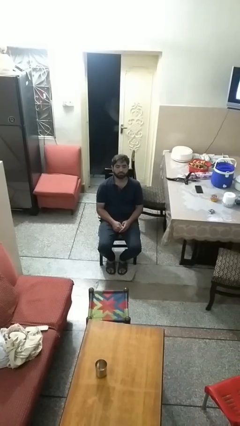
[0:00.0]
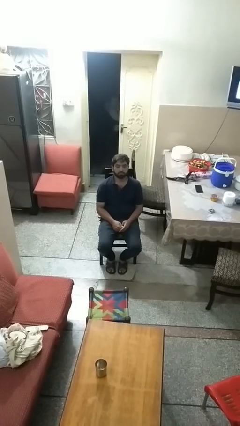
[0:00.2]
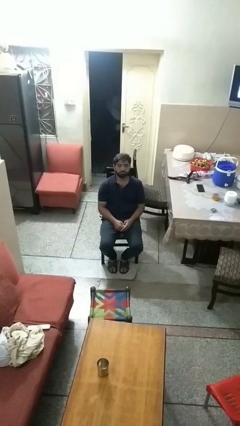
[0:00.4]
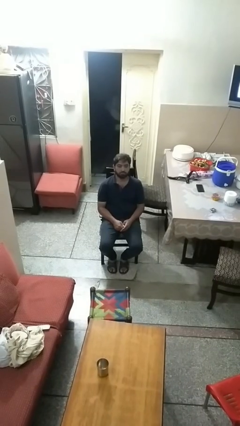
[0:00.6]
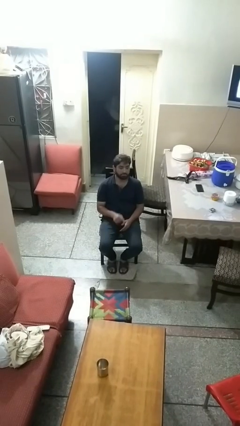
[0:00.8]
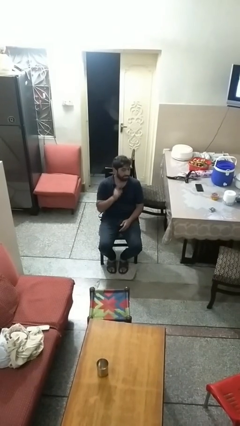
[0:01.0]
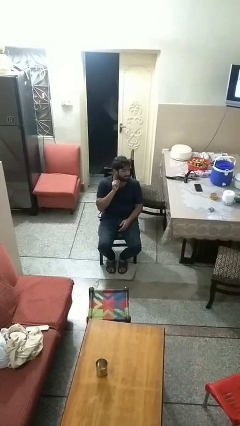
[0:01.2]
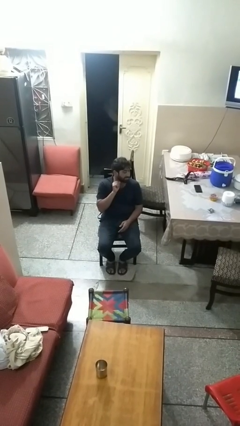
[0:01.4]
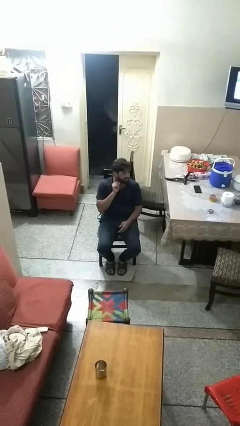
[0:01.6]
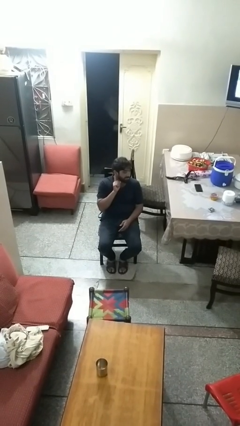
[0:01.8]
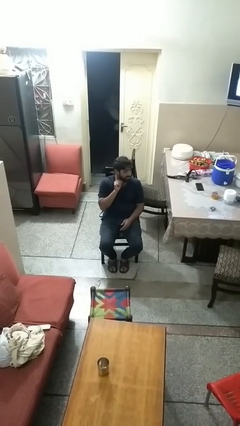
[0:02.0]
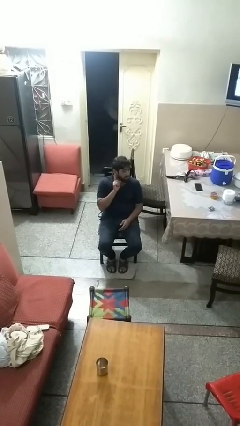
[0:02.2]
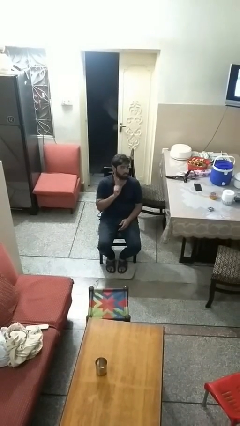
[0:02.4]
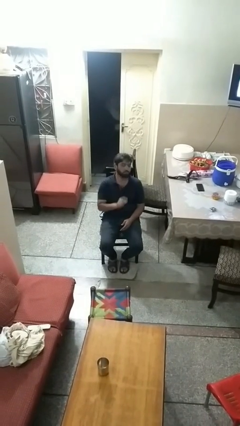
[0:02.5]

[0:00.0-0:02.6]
person gestures listen closely

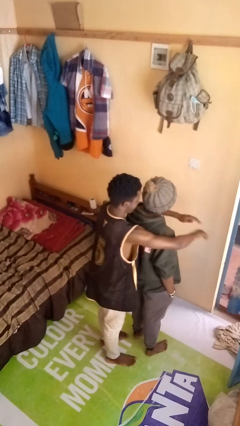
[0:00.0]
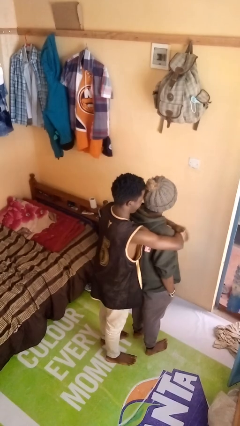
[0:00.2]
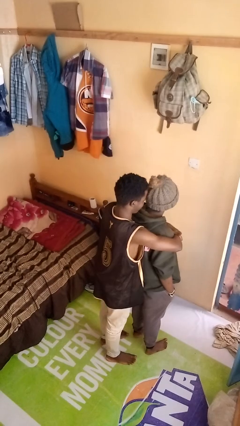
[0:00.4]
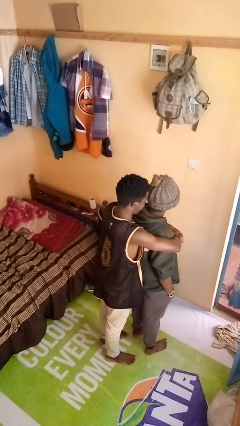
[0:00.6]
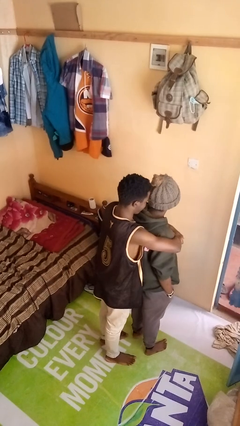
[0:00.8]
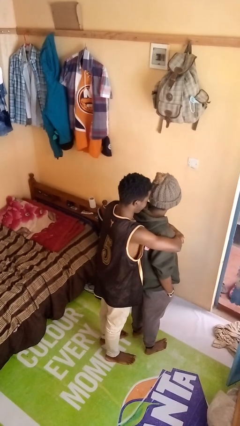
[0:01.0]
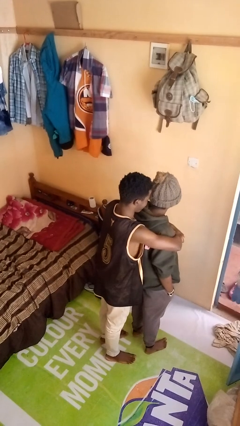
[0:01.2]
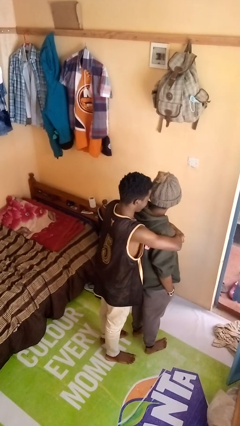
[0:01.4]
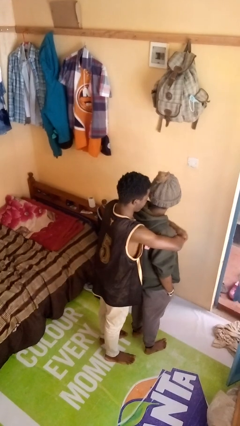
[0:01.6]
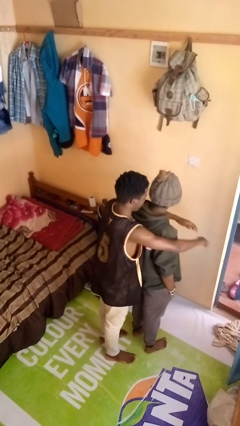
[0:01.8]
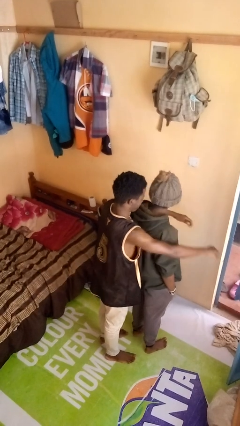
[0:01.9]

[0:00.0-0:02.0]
person hugs person from behind

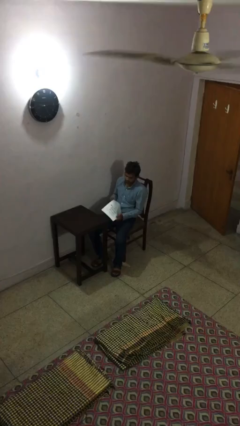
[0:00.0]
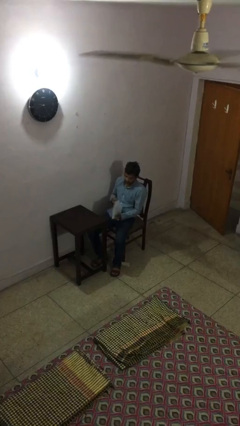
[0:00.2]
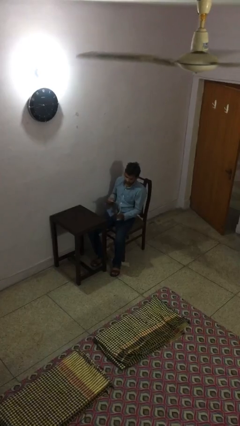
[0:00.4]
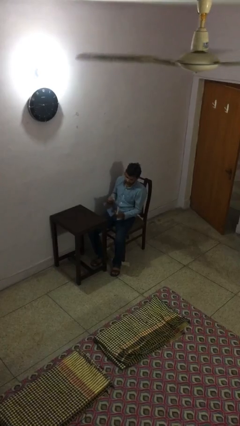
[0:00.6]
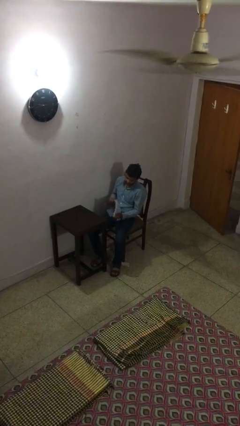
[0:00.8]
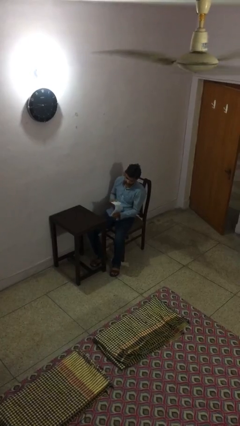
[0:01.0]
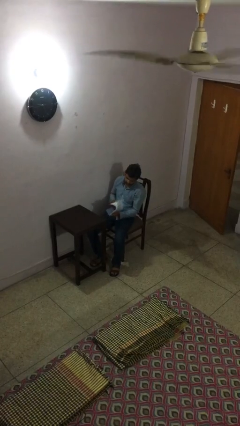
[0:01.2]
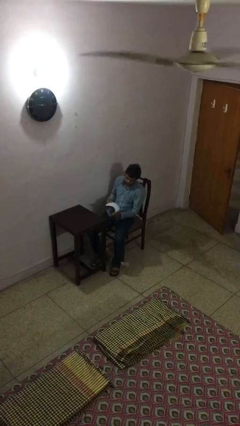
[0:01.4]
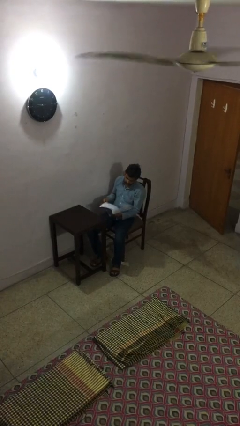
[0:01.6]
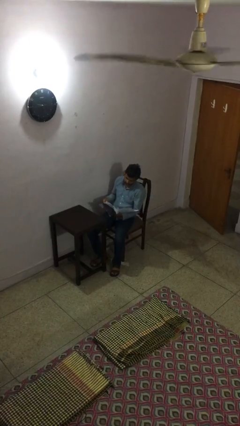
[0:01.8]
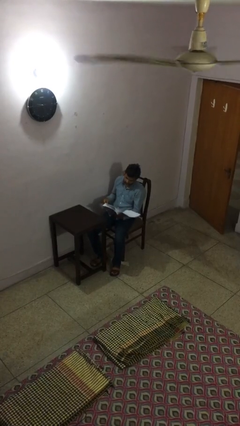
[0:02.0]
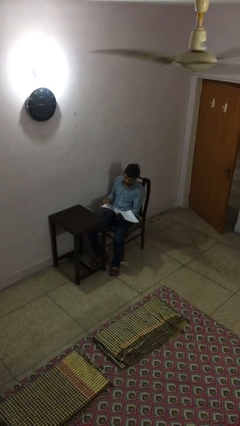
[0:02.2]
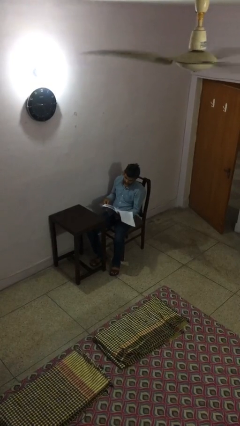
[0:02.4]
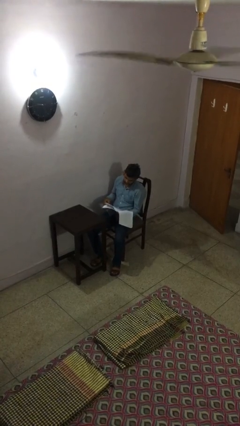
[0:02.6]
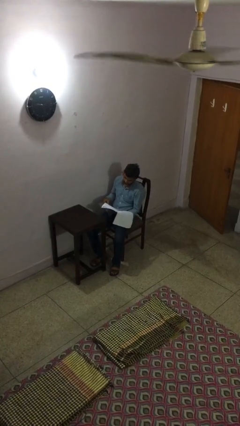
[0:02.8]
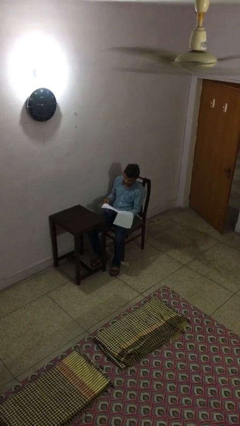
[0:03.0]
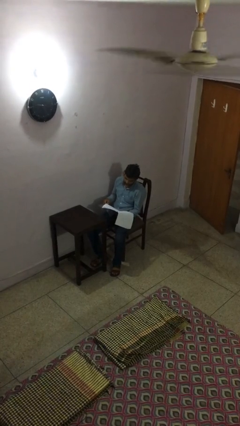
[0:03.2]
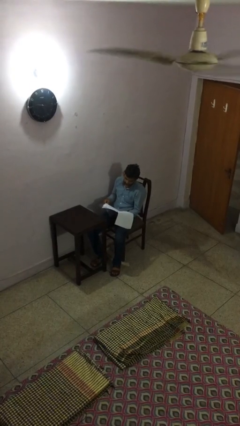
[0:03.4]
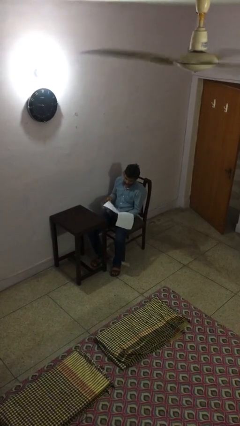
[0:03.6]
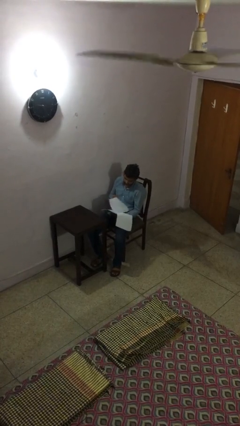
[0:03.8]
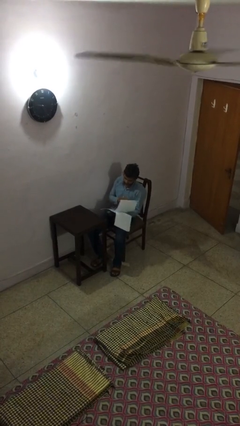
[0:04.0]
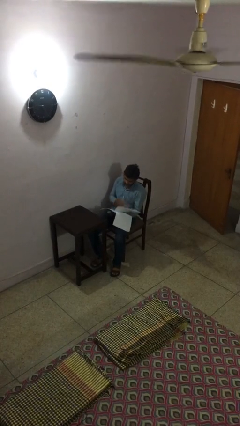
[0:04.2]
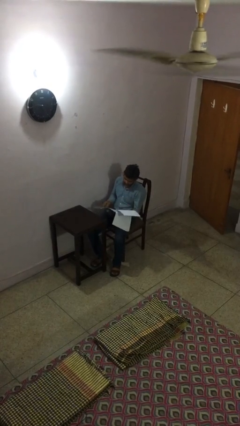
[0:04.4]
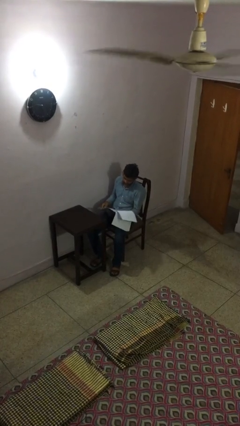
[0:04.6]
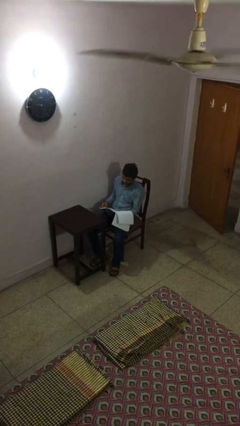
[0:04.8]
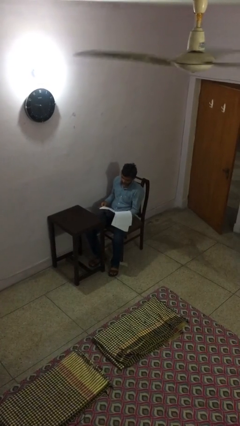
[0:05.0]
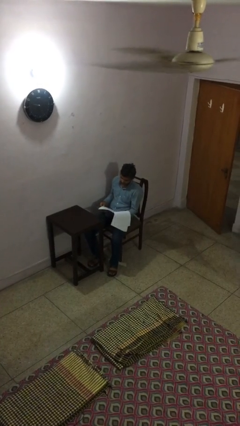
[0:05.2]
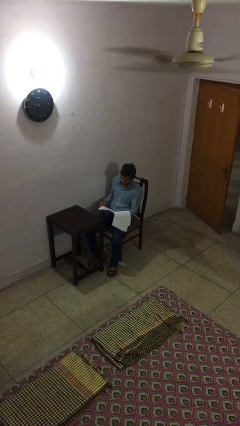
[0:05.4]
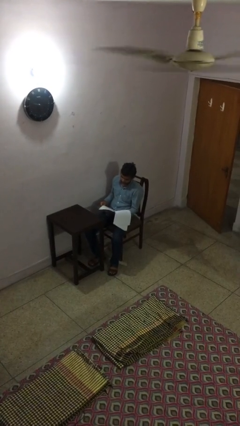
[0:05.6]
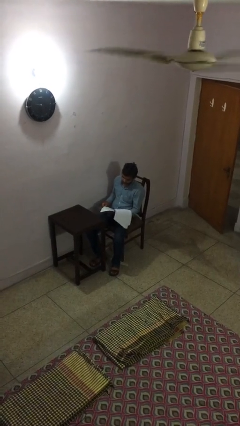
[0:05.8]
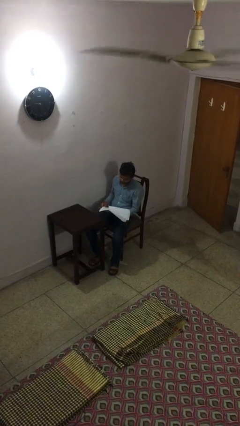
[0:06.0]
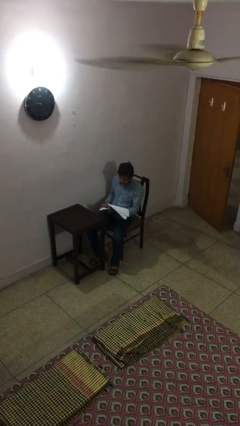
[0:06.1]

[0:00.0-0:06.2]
person reads document

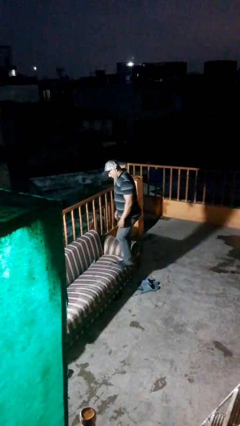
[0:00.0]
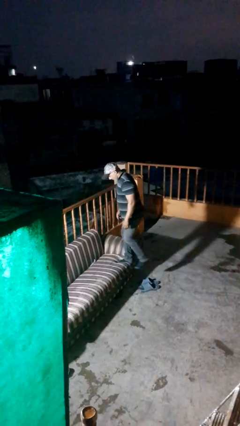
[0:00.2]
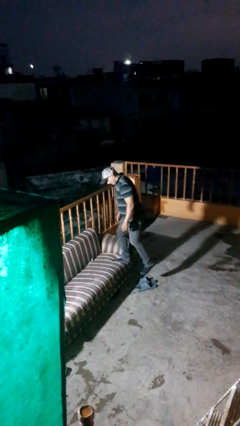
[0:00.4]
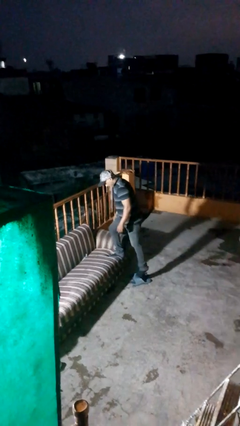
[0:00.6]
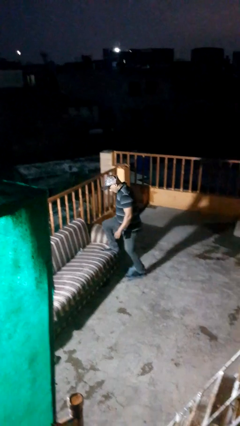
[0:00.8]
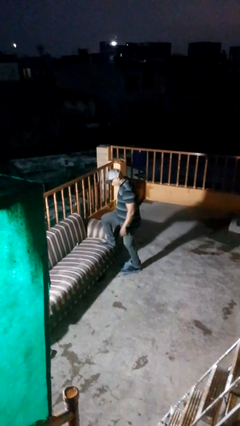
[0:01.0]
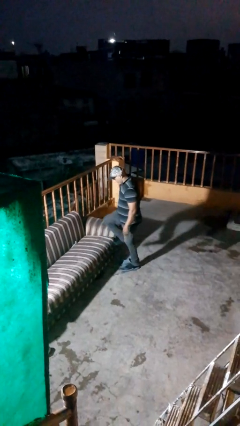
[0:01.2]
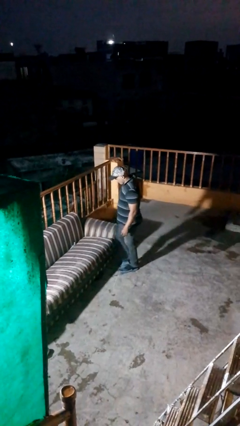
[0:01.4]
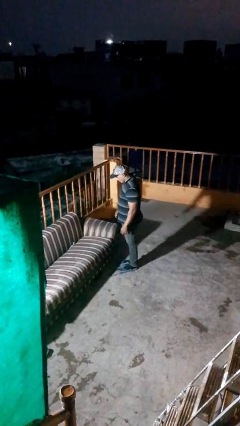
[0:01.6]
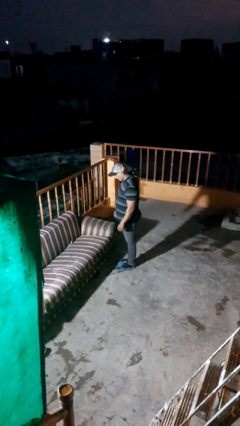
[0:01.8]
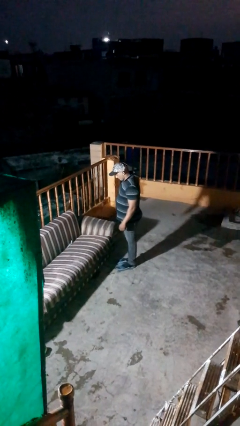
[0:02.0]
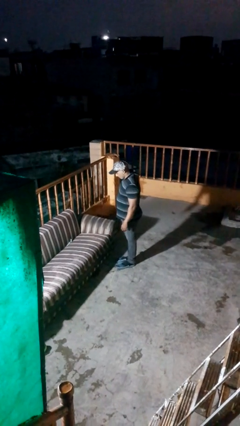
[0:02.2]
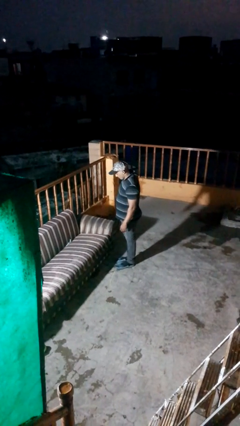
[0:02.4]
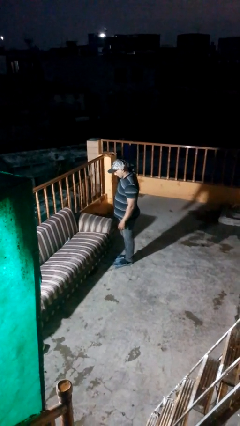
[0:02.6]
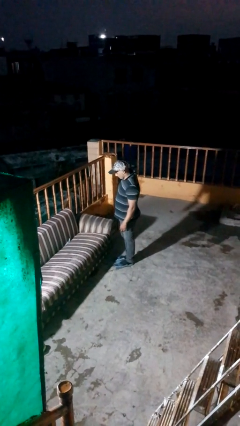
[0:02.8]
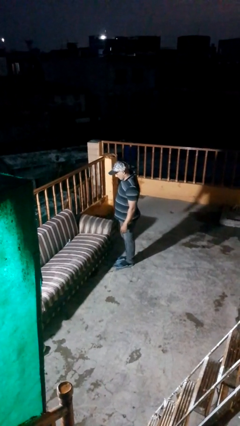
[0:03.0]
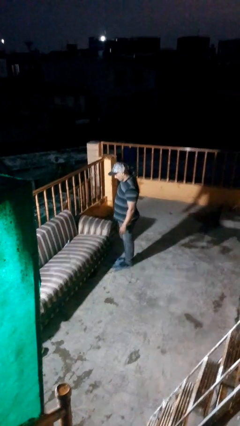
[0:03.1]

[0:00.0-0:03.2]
person climbs off couch

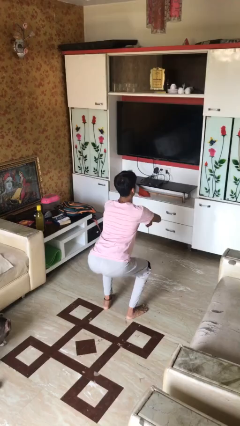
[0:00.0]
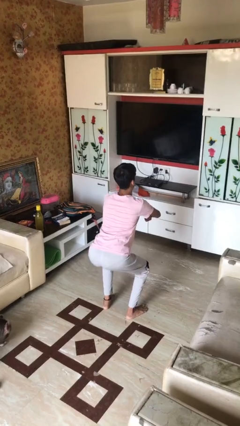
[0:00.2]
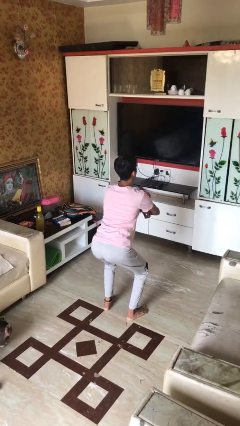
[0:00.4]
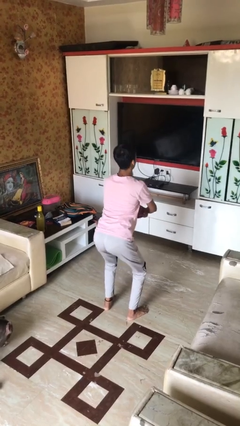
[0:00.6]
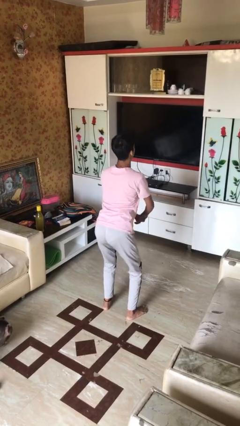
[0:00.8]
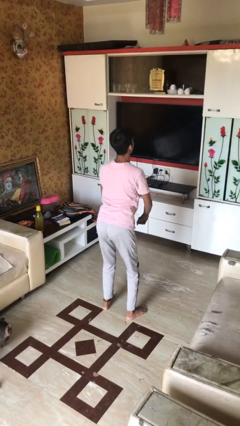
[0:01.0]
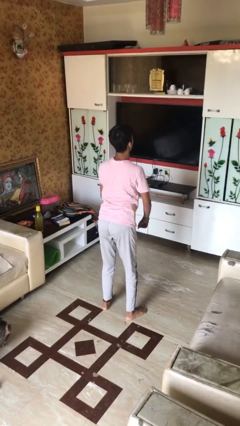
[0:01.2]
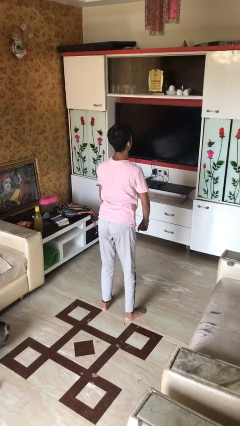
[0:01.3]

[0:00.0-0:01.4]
person stands up

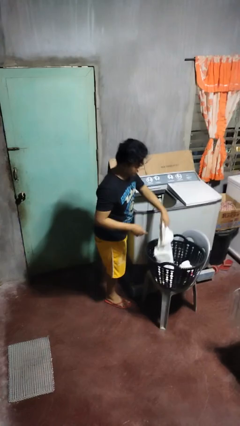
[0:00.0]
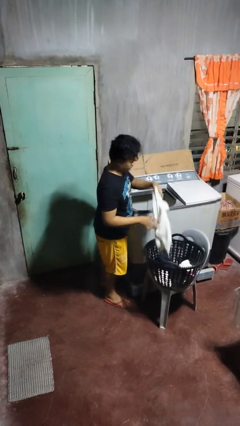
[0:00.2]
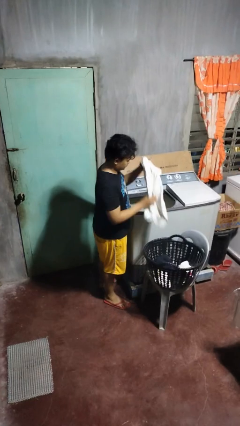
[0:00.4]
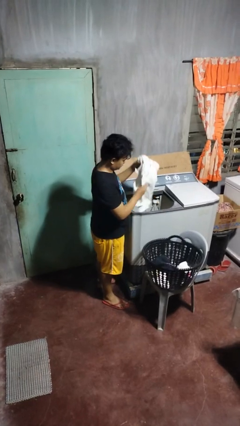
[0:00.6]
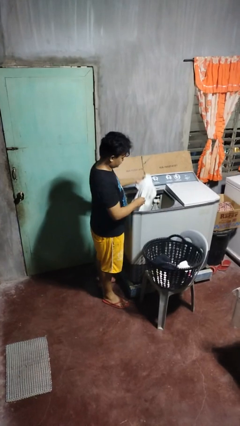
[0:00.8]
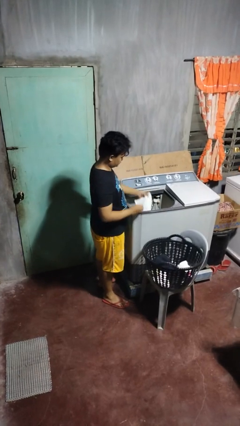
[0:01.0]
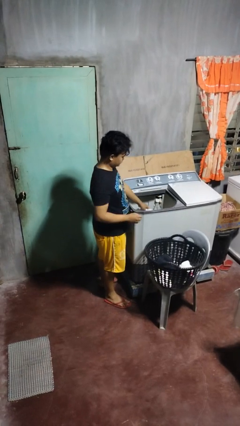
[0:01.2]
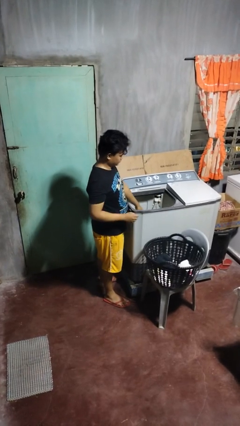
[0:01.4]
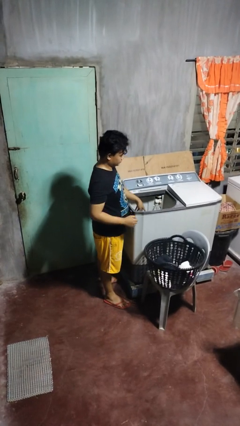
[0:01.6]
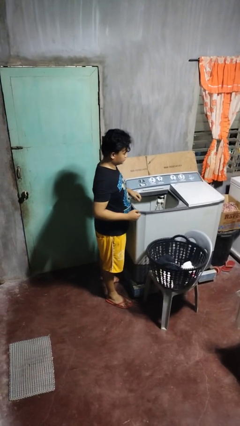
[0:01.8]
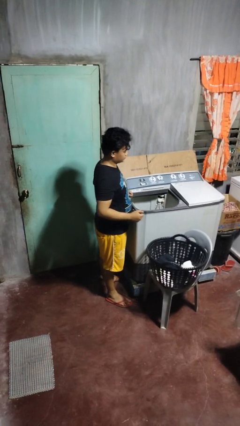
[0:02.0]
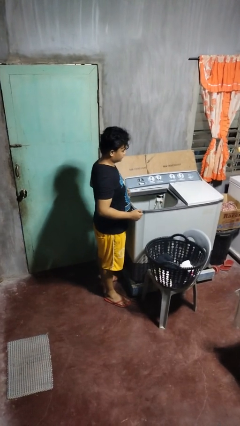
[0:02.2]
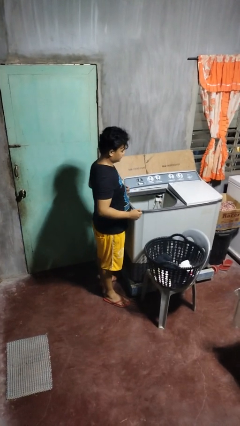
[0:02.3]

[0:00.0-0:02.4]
person loads clotheswasher
